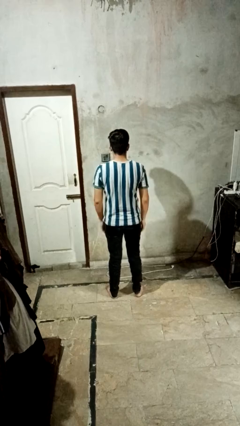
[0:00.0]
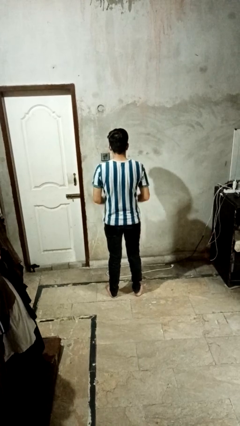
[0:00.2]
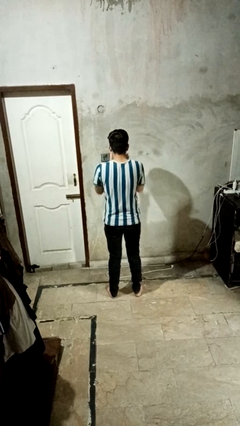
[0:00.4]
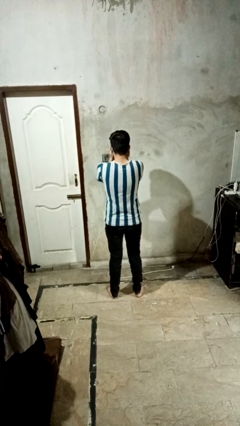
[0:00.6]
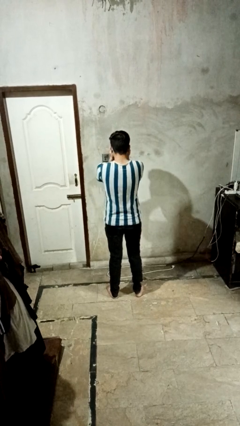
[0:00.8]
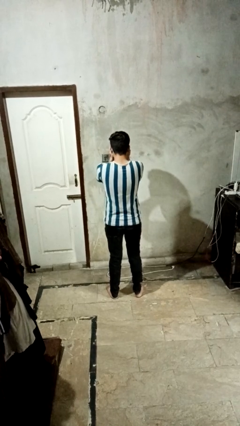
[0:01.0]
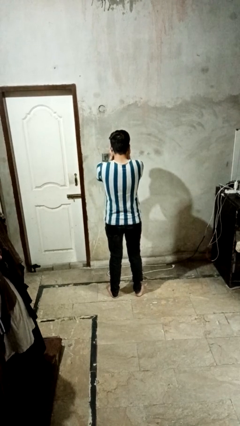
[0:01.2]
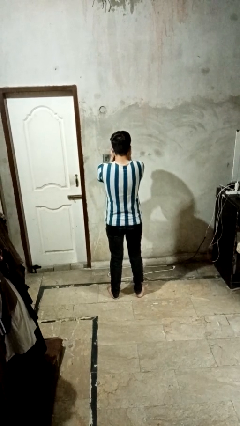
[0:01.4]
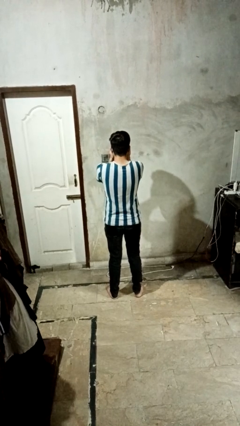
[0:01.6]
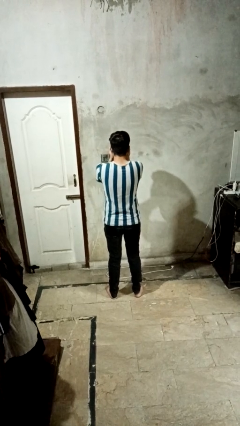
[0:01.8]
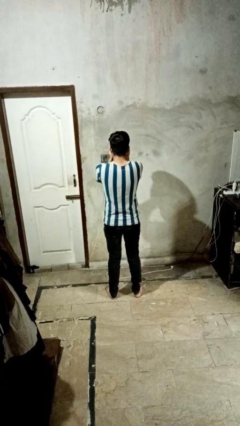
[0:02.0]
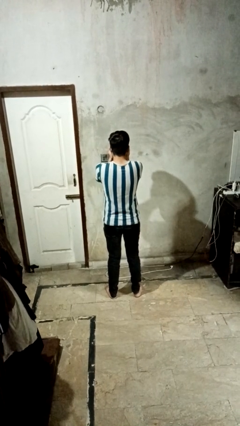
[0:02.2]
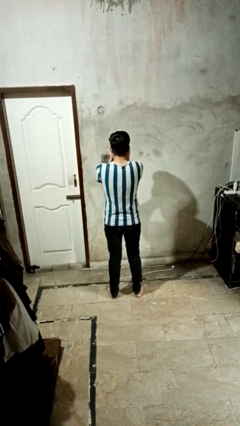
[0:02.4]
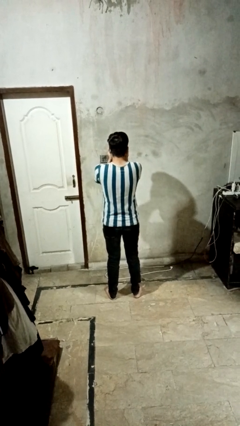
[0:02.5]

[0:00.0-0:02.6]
person covers face with hands

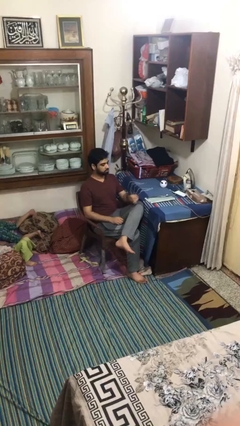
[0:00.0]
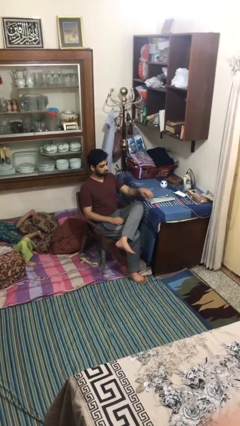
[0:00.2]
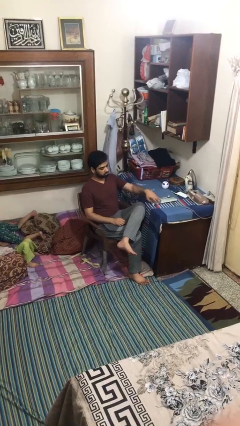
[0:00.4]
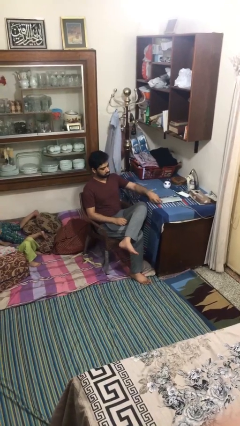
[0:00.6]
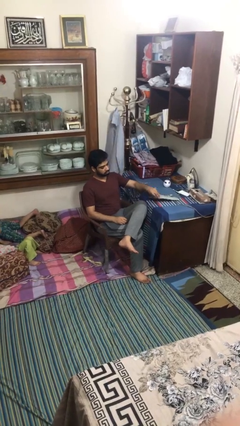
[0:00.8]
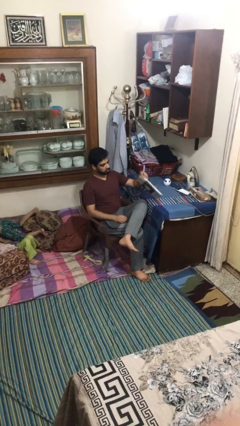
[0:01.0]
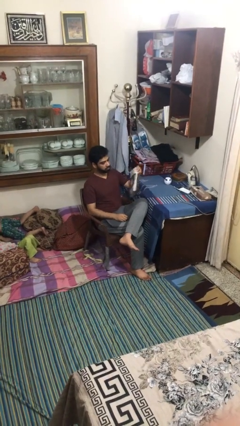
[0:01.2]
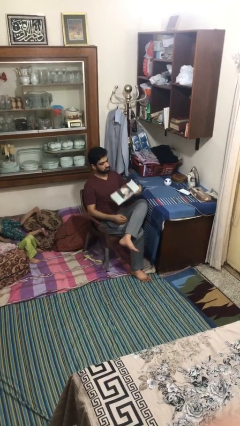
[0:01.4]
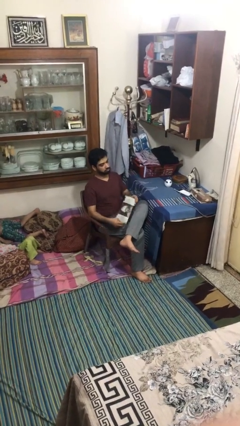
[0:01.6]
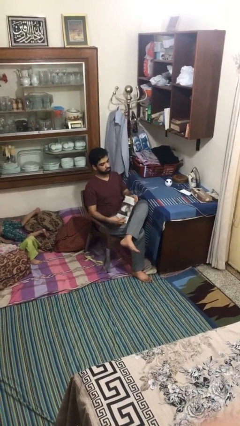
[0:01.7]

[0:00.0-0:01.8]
person picks up object from table

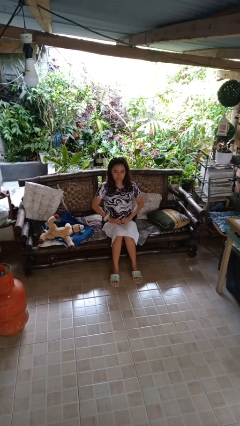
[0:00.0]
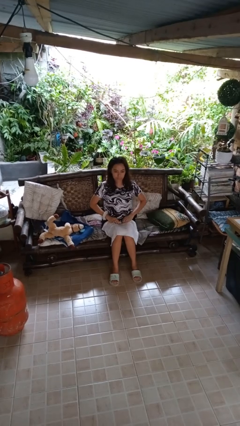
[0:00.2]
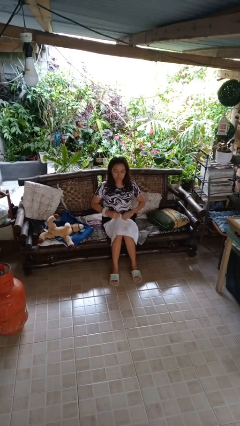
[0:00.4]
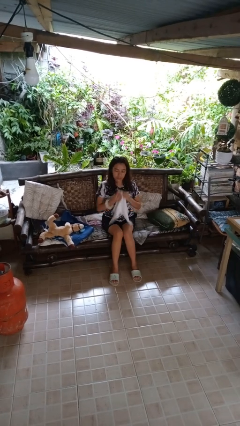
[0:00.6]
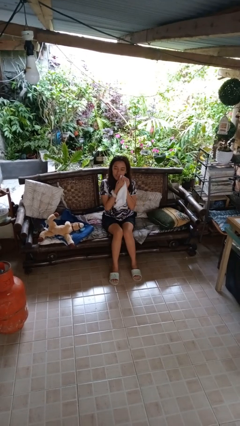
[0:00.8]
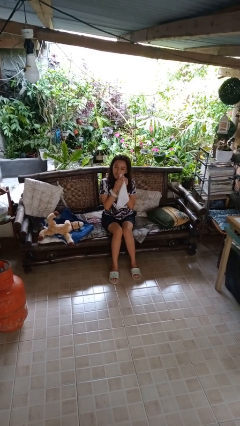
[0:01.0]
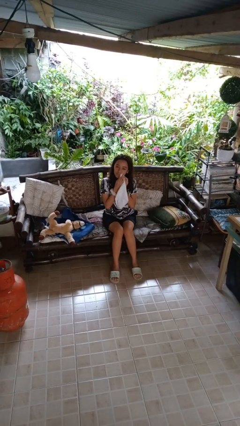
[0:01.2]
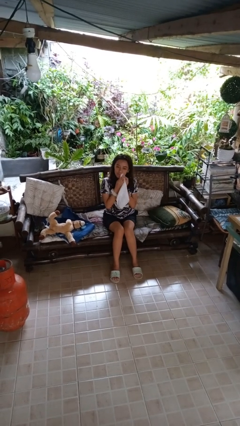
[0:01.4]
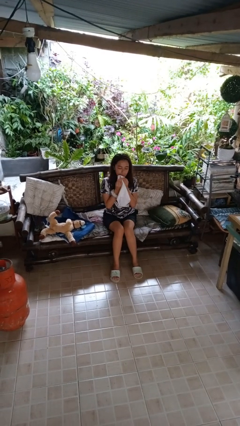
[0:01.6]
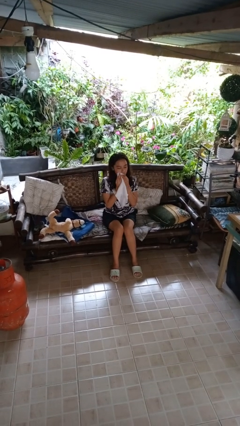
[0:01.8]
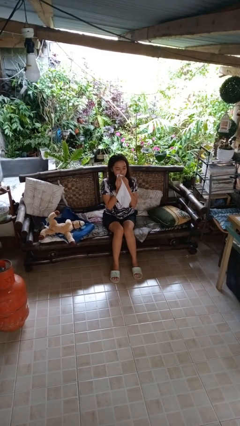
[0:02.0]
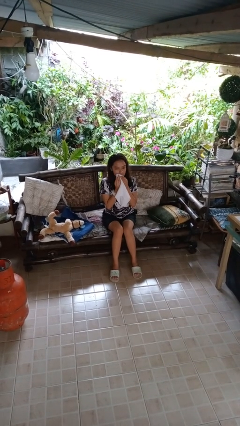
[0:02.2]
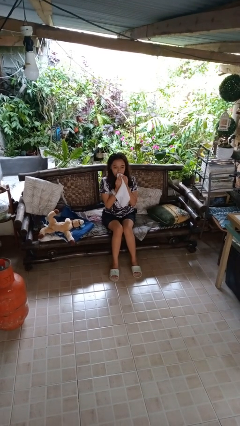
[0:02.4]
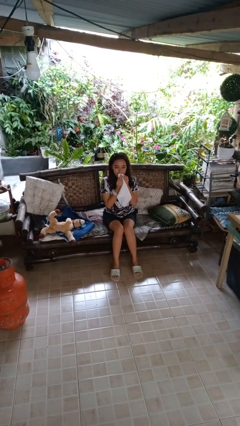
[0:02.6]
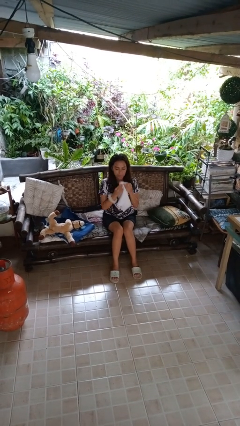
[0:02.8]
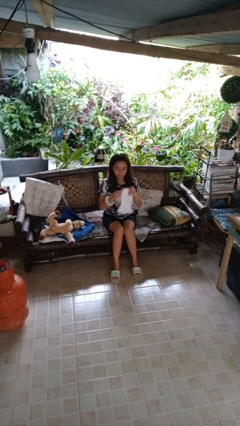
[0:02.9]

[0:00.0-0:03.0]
person wipes mouth with napkin

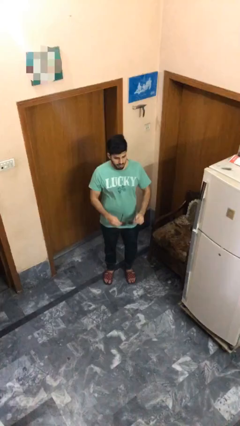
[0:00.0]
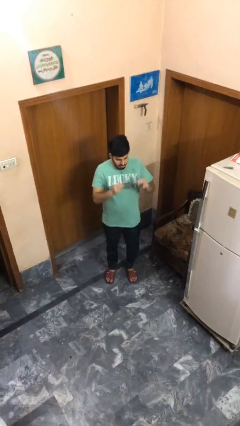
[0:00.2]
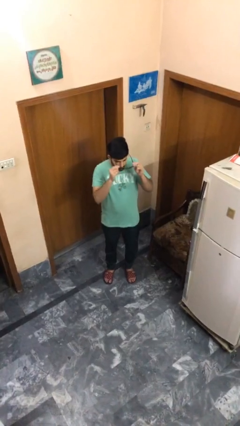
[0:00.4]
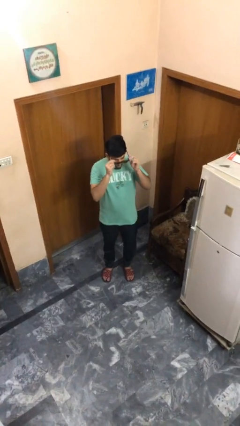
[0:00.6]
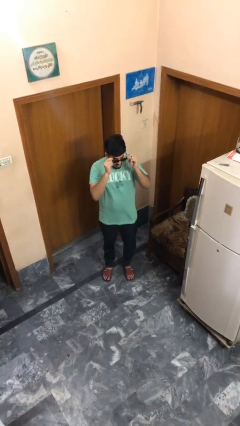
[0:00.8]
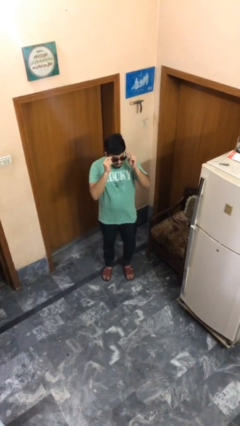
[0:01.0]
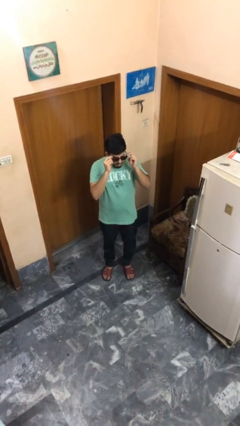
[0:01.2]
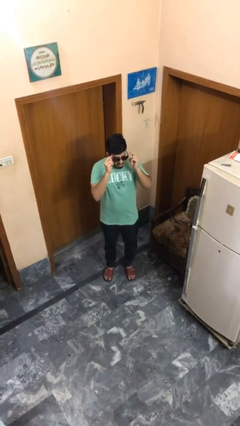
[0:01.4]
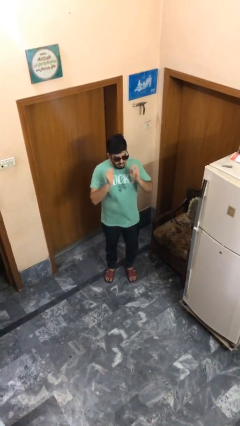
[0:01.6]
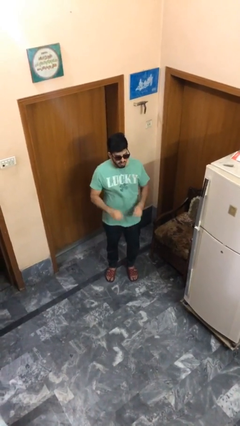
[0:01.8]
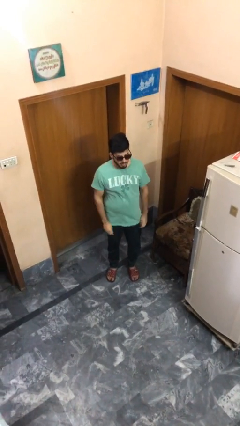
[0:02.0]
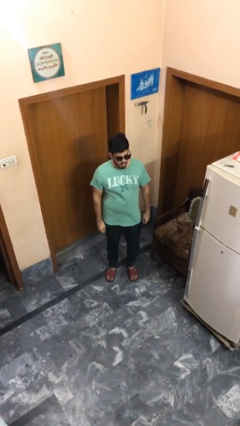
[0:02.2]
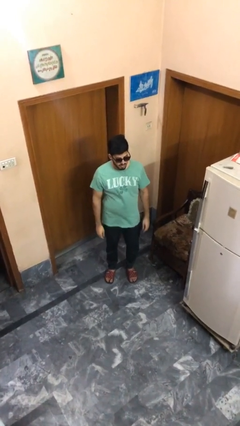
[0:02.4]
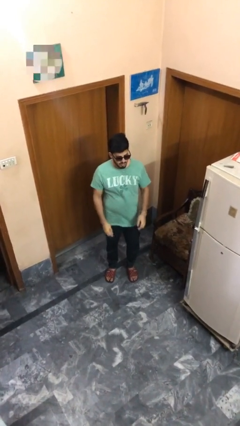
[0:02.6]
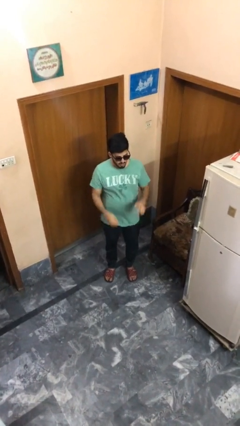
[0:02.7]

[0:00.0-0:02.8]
person puts on sunglasses

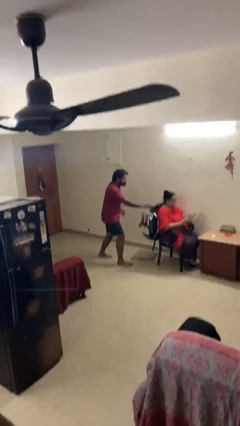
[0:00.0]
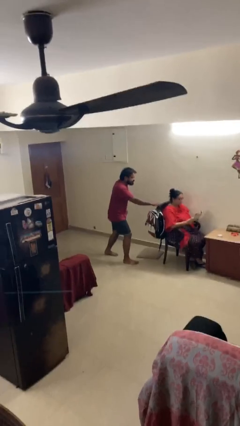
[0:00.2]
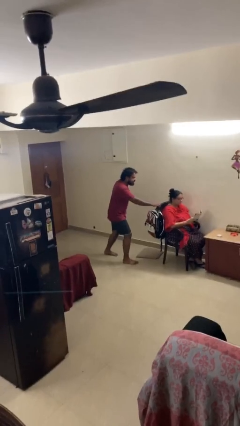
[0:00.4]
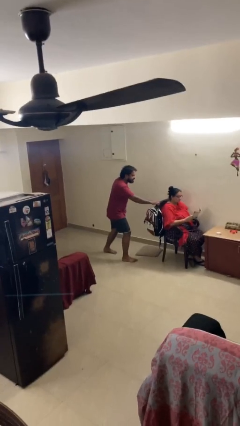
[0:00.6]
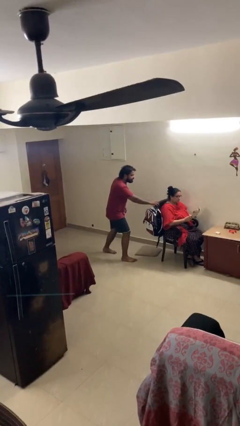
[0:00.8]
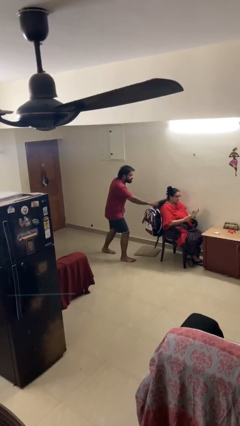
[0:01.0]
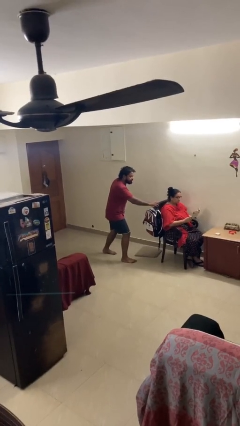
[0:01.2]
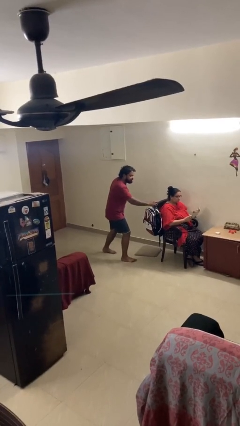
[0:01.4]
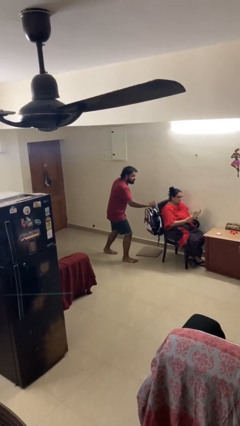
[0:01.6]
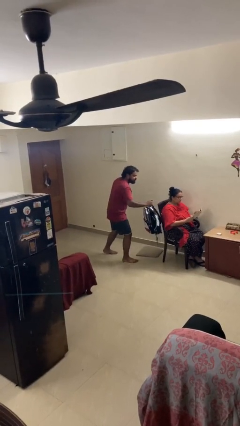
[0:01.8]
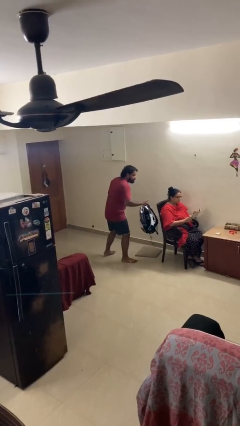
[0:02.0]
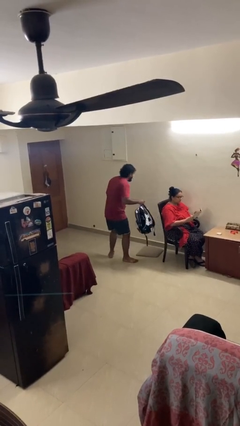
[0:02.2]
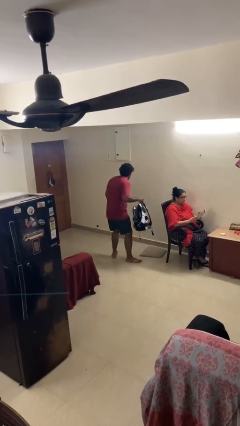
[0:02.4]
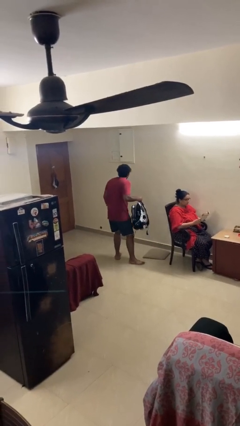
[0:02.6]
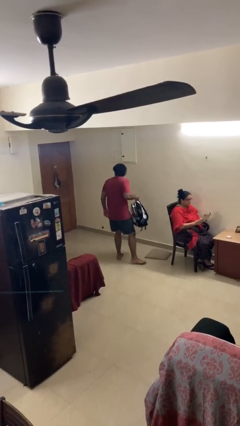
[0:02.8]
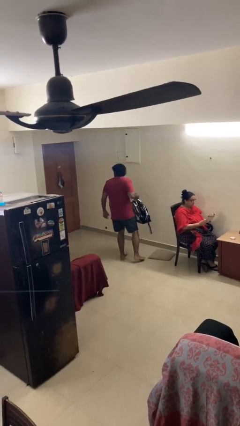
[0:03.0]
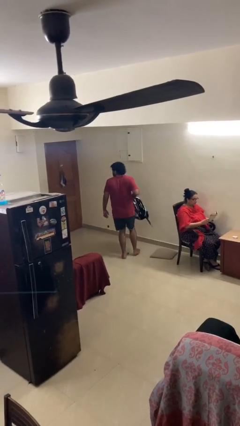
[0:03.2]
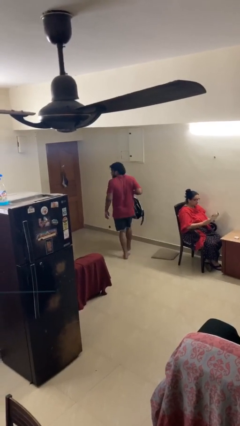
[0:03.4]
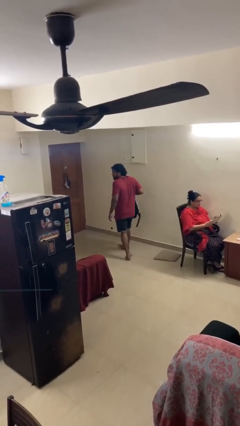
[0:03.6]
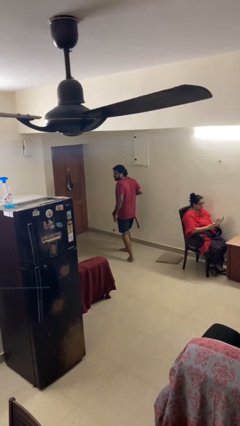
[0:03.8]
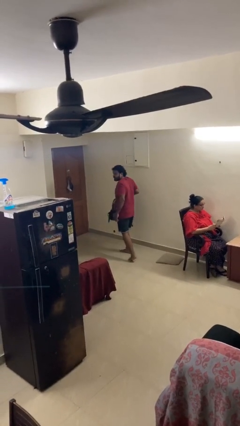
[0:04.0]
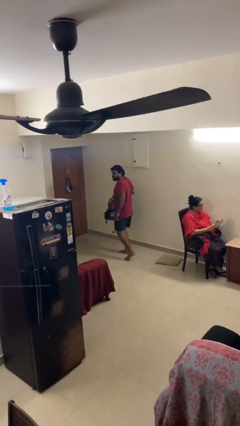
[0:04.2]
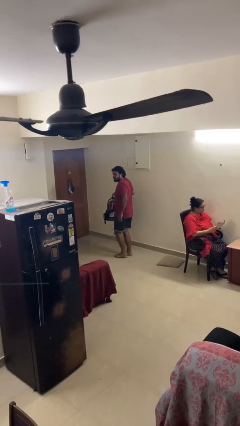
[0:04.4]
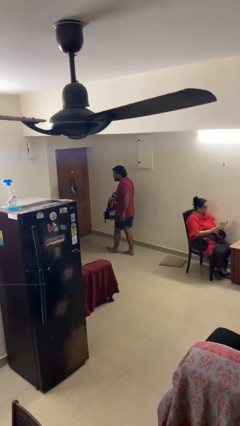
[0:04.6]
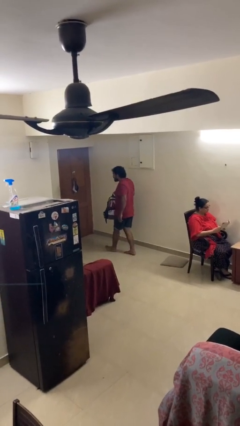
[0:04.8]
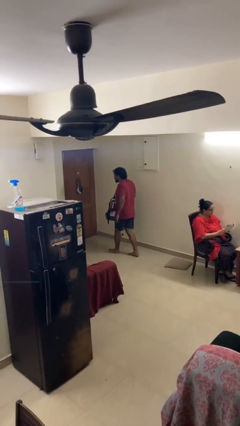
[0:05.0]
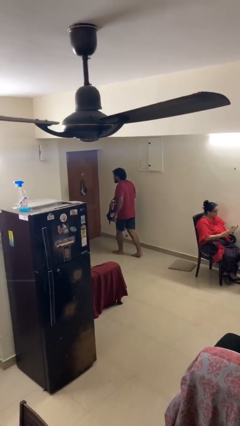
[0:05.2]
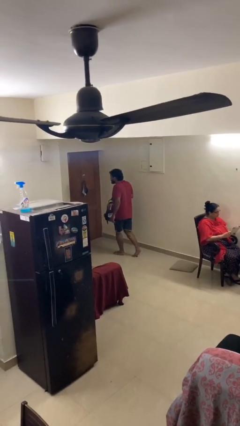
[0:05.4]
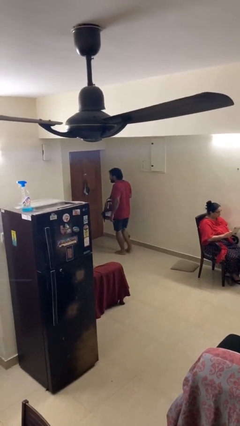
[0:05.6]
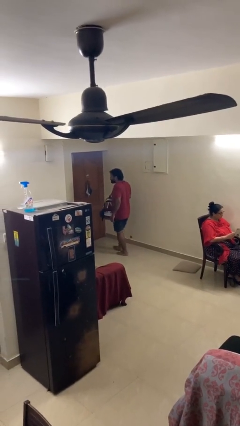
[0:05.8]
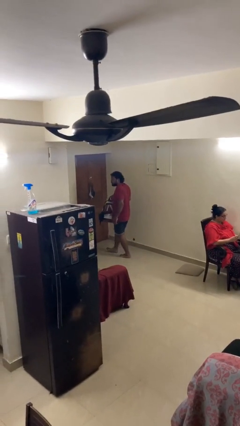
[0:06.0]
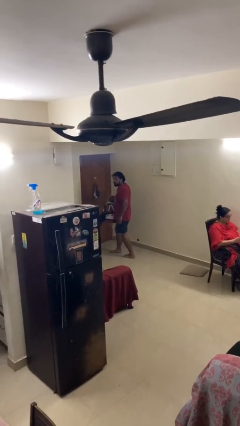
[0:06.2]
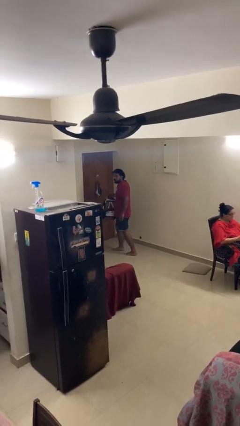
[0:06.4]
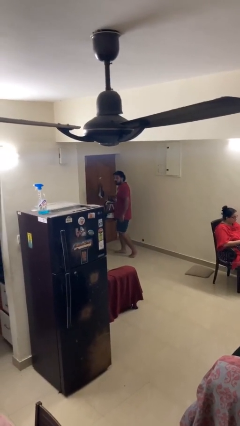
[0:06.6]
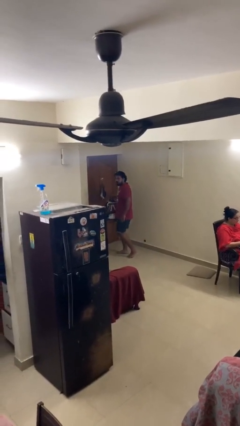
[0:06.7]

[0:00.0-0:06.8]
person steals object from person

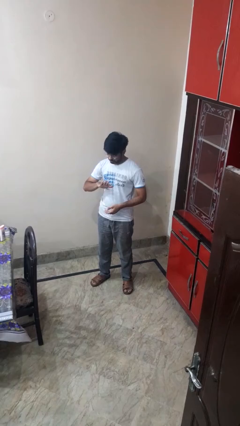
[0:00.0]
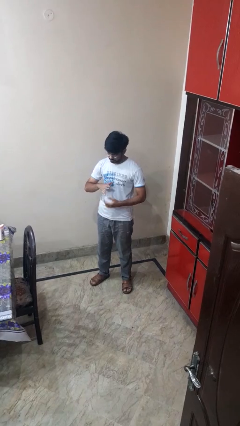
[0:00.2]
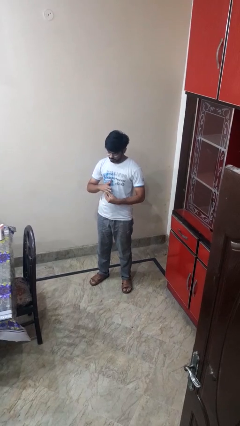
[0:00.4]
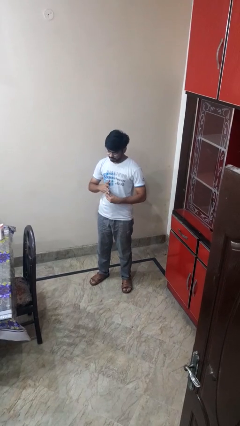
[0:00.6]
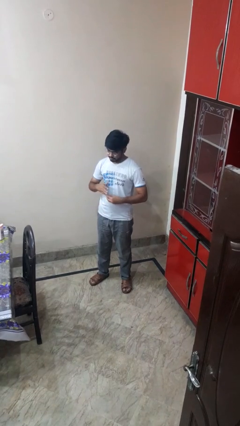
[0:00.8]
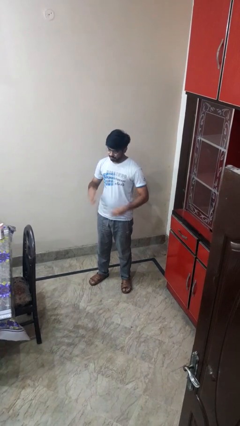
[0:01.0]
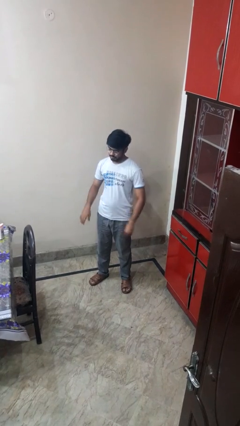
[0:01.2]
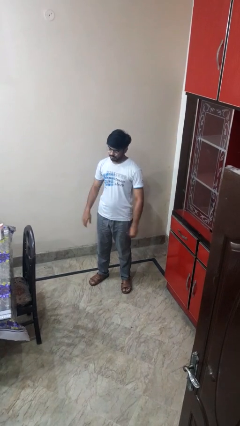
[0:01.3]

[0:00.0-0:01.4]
person takes off ring
